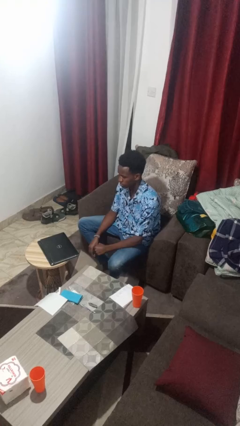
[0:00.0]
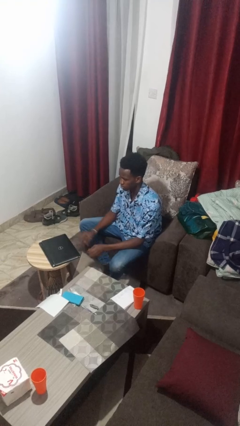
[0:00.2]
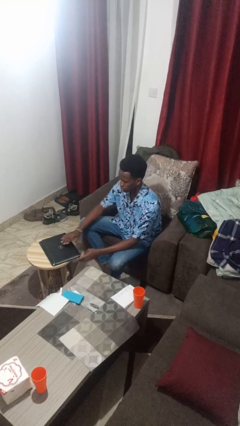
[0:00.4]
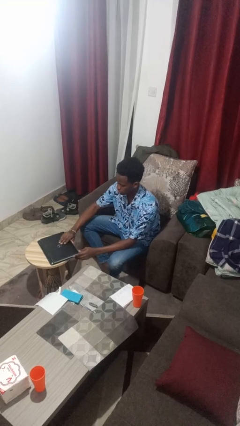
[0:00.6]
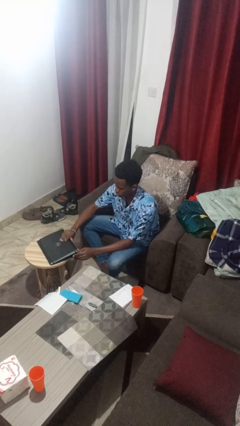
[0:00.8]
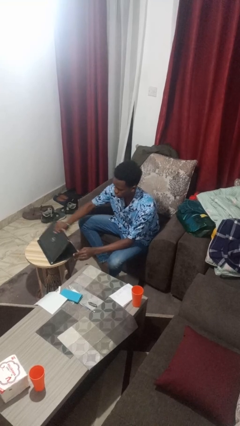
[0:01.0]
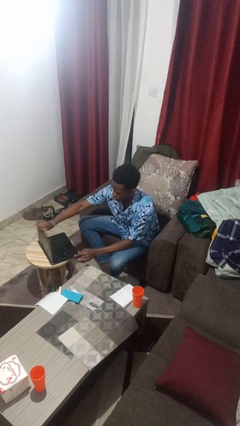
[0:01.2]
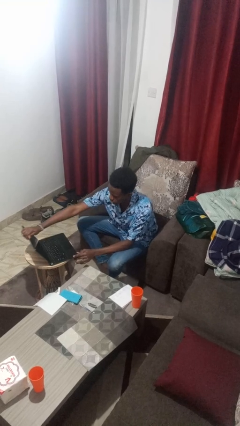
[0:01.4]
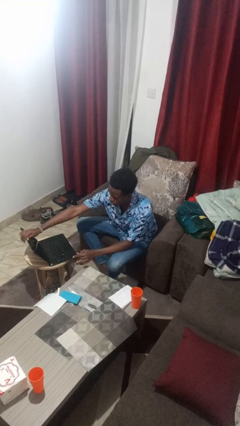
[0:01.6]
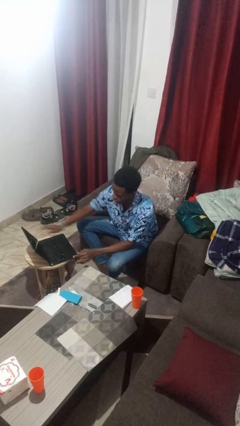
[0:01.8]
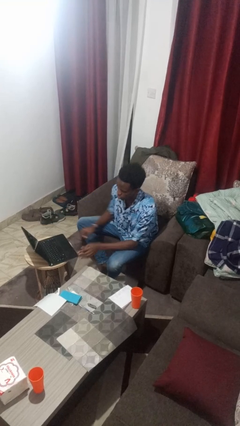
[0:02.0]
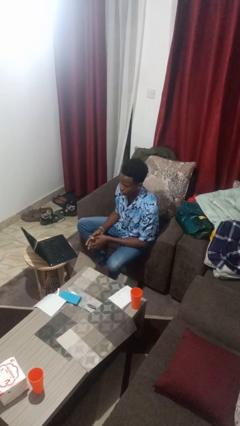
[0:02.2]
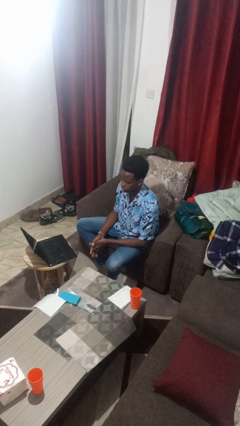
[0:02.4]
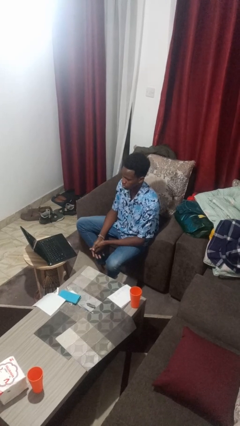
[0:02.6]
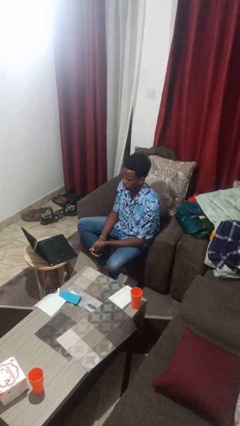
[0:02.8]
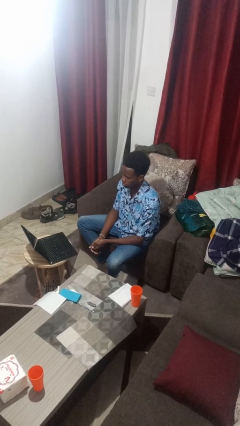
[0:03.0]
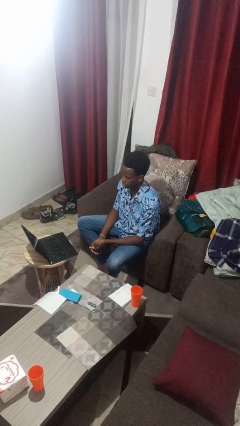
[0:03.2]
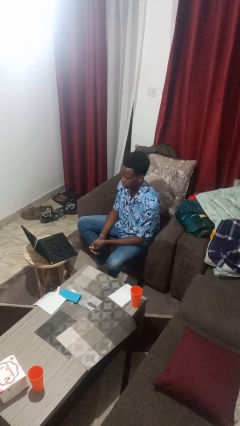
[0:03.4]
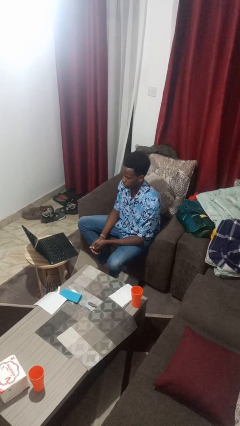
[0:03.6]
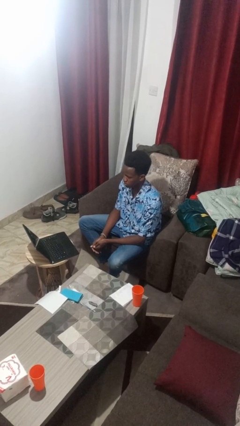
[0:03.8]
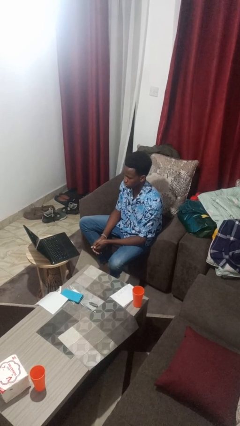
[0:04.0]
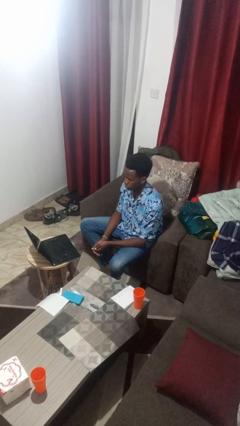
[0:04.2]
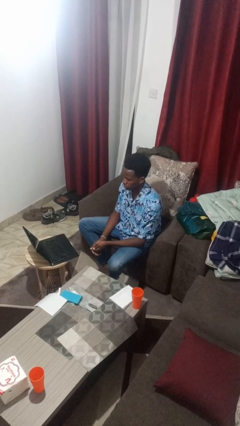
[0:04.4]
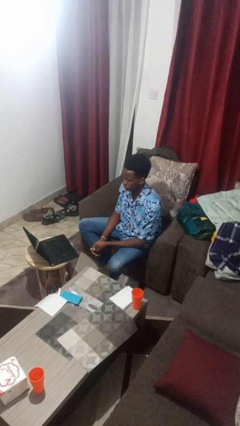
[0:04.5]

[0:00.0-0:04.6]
person opens laptop

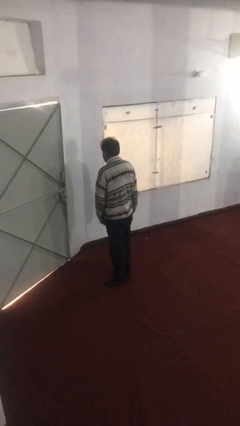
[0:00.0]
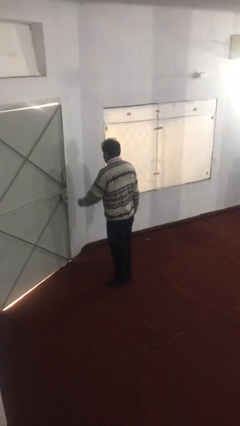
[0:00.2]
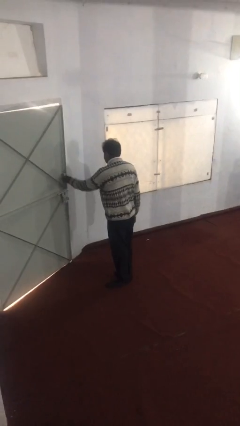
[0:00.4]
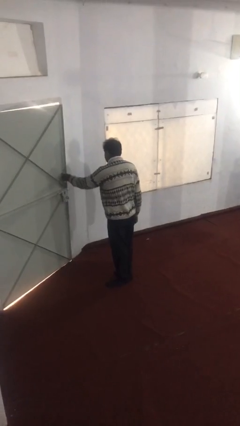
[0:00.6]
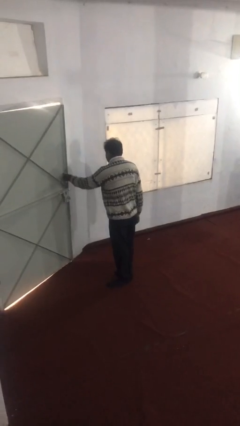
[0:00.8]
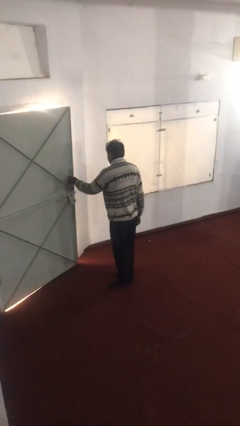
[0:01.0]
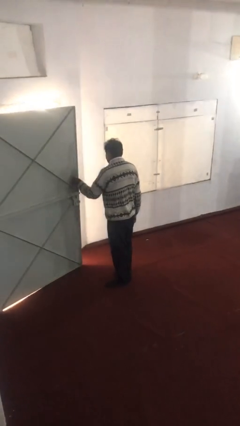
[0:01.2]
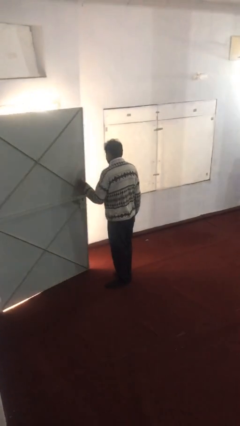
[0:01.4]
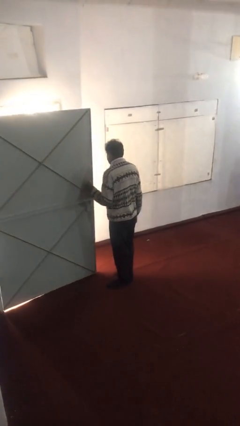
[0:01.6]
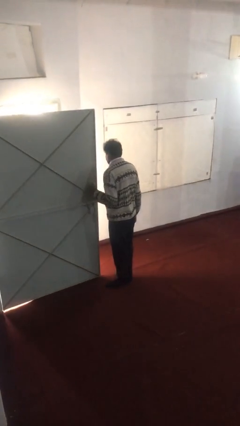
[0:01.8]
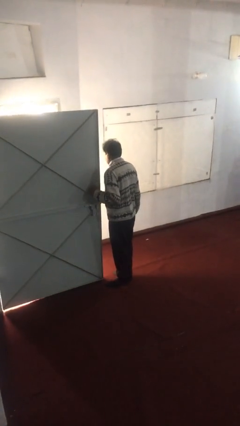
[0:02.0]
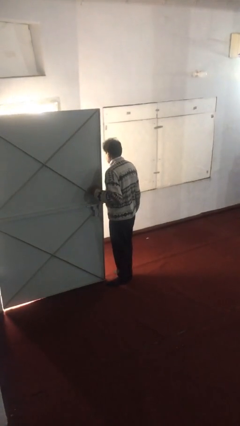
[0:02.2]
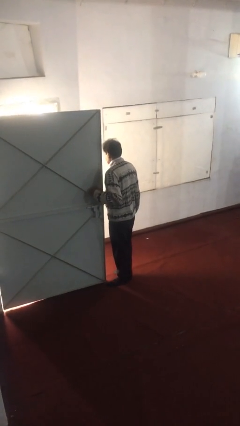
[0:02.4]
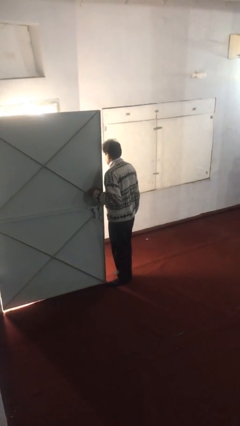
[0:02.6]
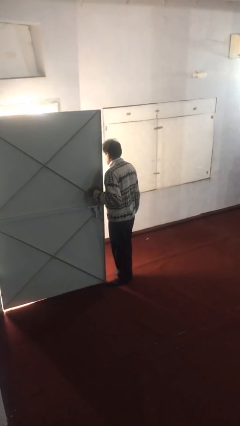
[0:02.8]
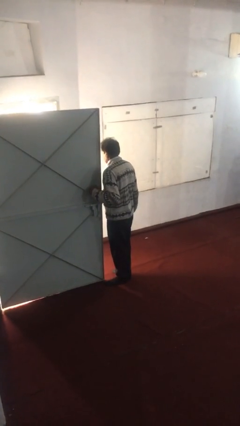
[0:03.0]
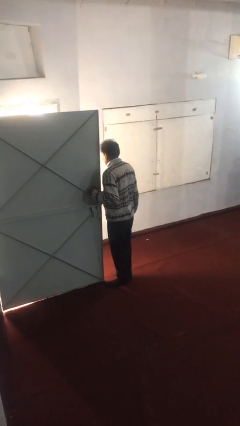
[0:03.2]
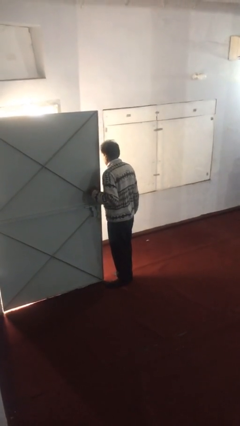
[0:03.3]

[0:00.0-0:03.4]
person opens facility door

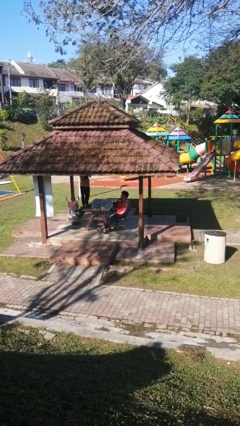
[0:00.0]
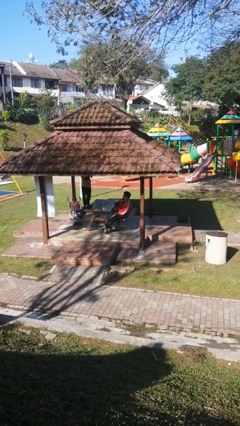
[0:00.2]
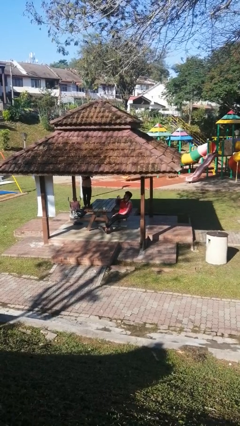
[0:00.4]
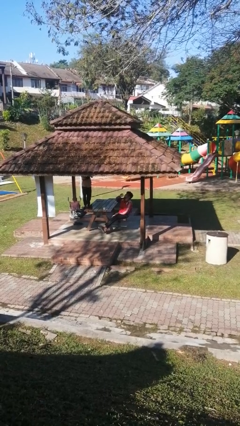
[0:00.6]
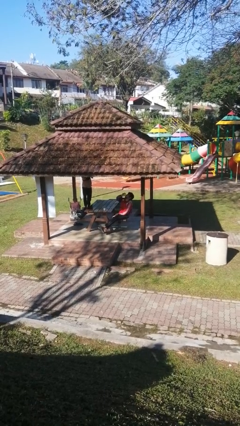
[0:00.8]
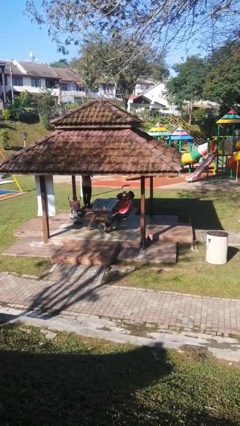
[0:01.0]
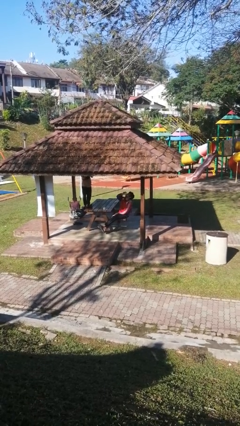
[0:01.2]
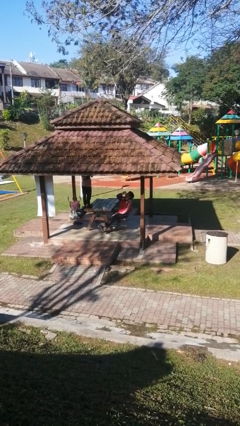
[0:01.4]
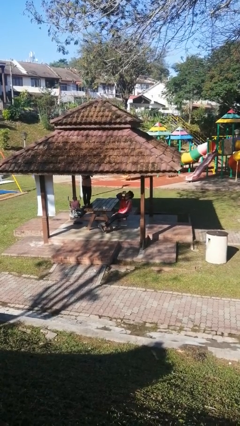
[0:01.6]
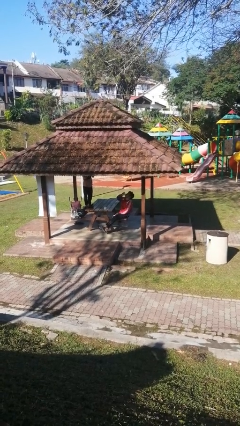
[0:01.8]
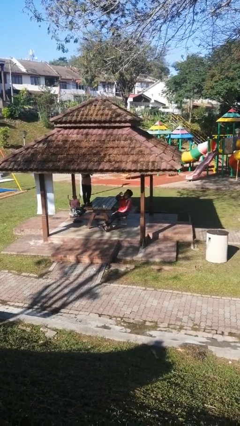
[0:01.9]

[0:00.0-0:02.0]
person drinks from shotglass

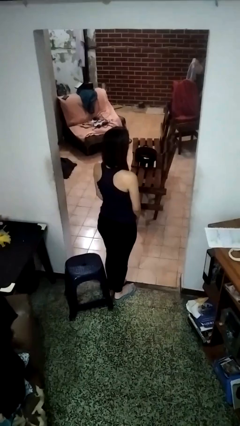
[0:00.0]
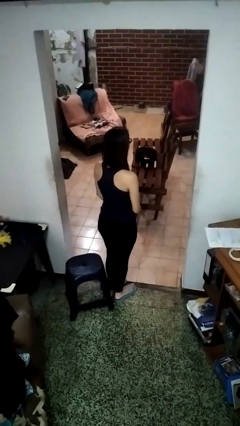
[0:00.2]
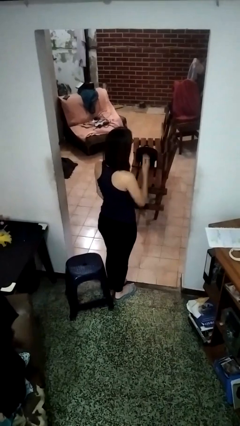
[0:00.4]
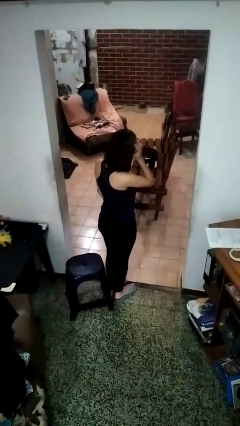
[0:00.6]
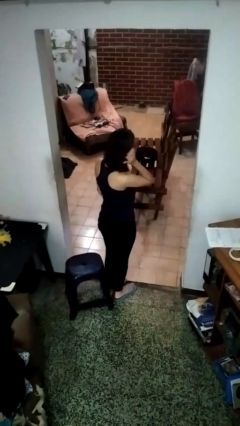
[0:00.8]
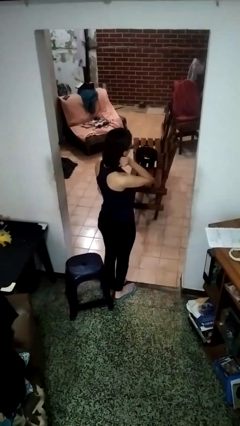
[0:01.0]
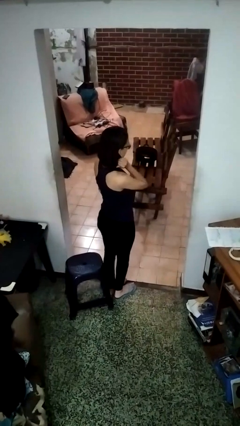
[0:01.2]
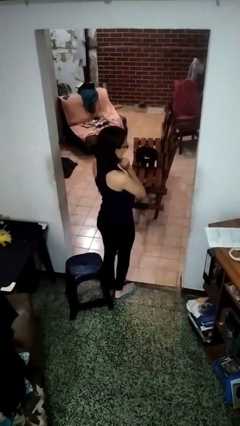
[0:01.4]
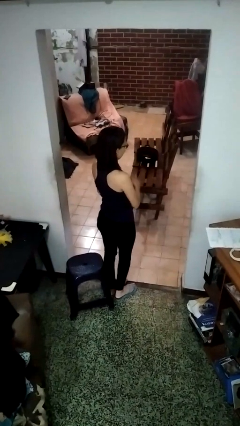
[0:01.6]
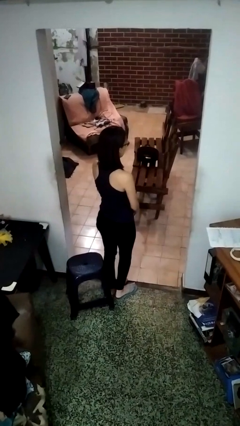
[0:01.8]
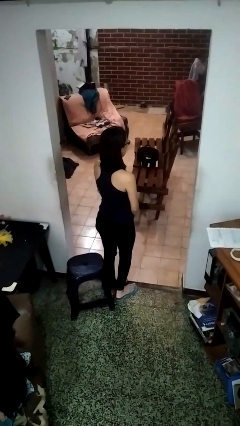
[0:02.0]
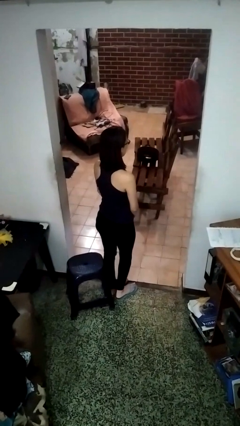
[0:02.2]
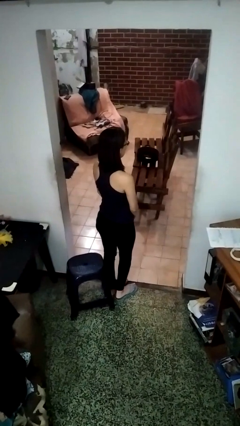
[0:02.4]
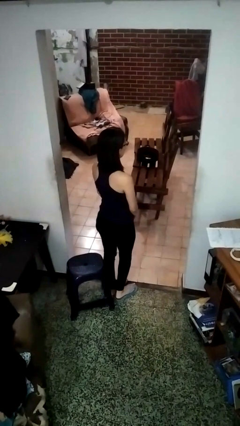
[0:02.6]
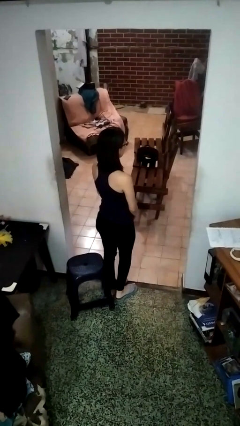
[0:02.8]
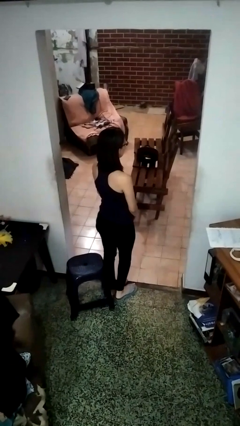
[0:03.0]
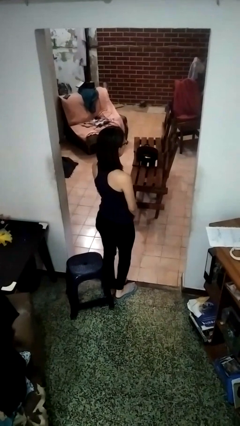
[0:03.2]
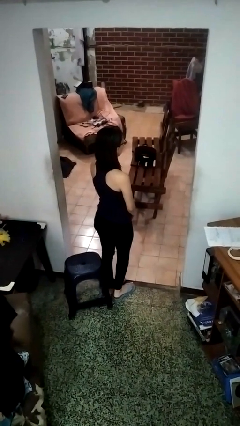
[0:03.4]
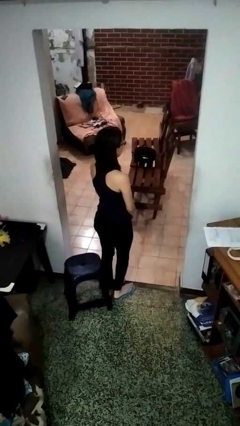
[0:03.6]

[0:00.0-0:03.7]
person strokes hair

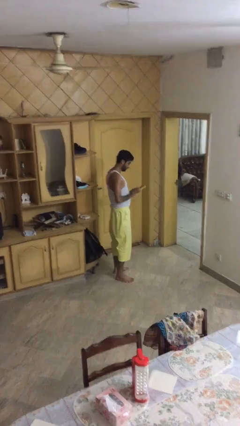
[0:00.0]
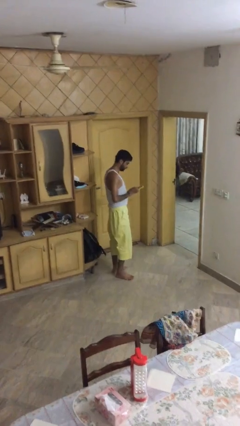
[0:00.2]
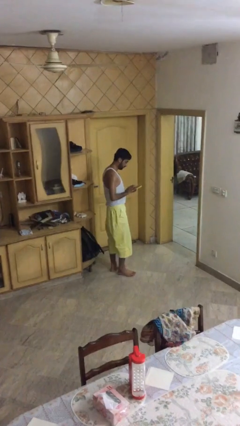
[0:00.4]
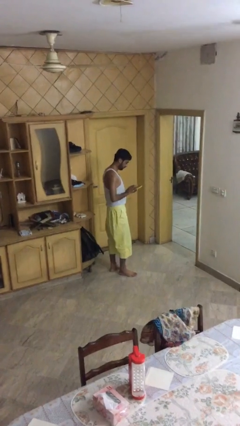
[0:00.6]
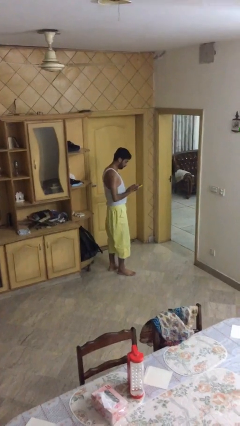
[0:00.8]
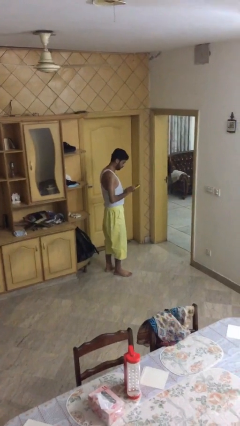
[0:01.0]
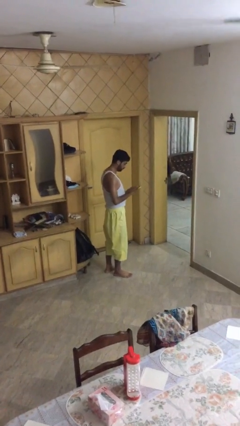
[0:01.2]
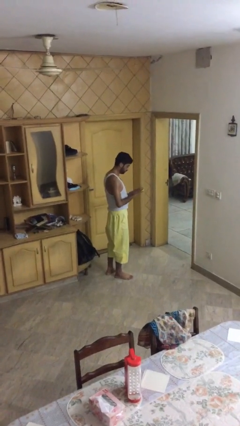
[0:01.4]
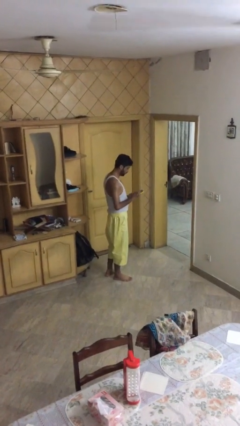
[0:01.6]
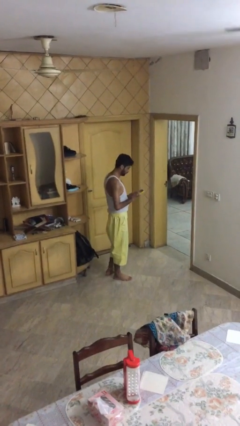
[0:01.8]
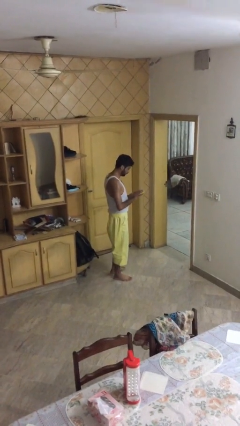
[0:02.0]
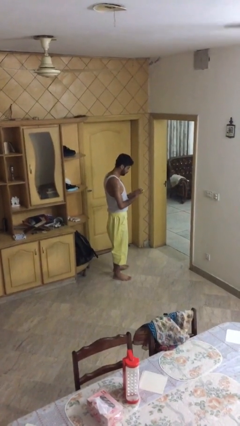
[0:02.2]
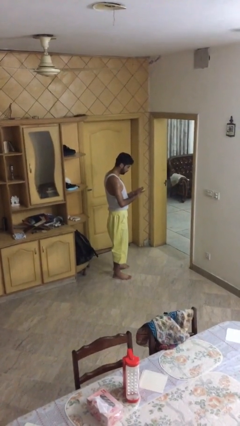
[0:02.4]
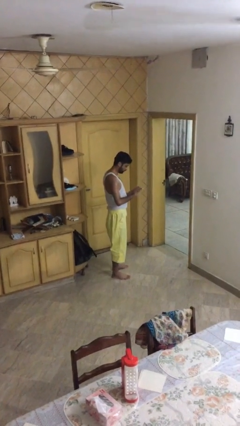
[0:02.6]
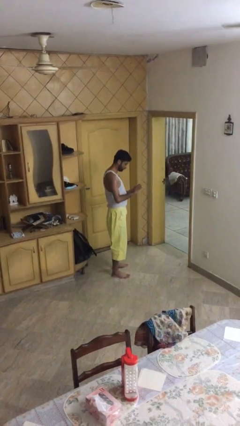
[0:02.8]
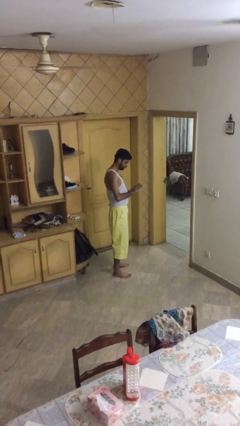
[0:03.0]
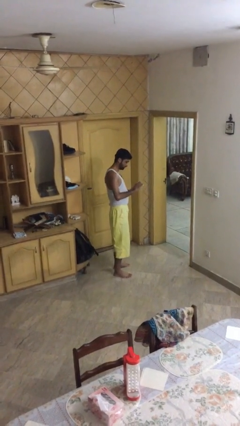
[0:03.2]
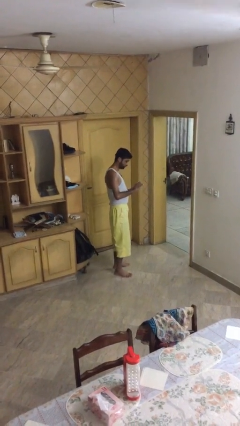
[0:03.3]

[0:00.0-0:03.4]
person texts on phone

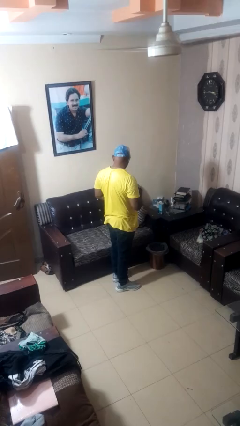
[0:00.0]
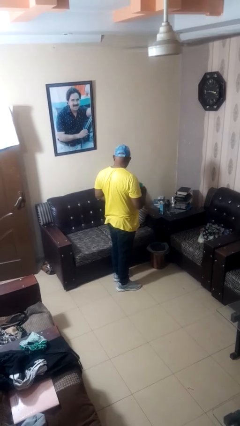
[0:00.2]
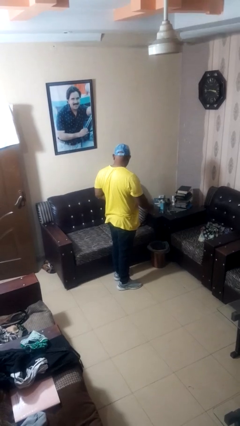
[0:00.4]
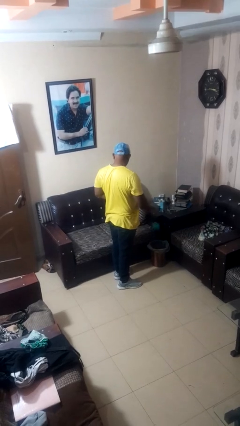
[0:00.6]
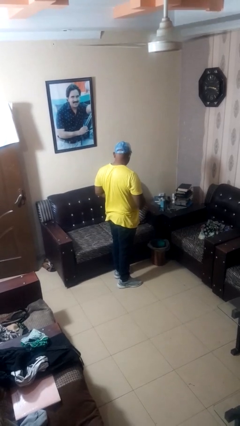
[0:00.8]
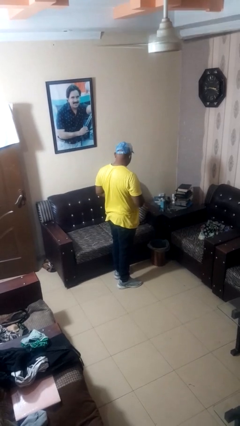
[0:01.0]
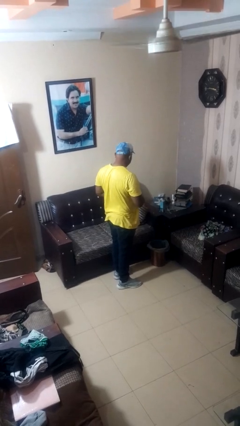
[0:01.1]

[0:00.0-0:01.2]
person discards trash
